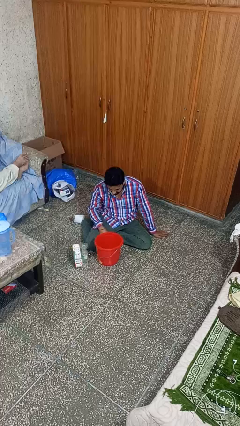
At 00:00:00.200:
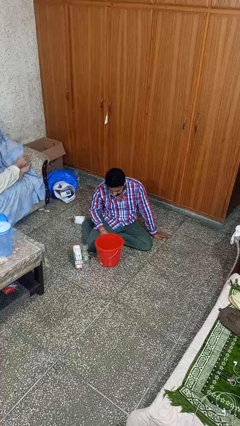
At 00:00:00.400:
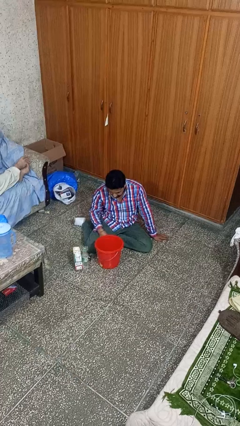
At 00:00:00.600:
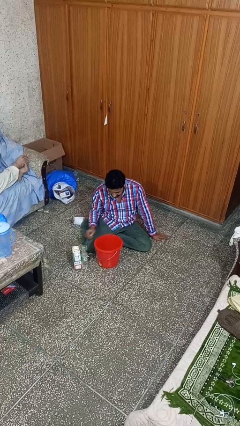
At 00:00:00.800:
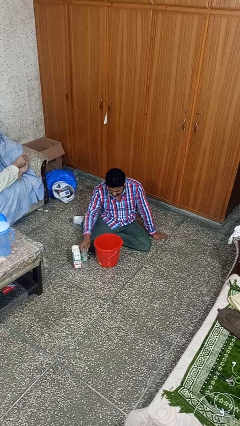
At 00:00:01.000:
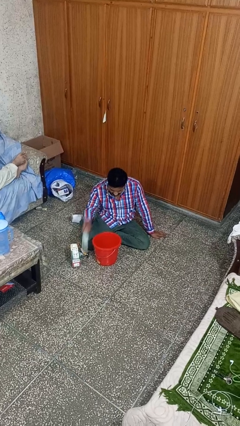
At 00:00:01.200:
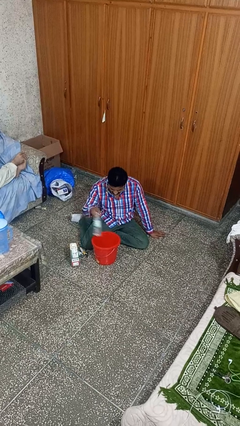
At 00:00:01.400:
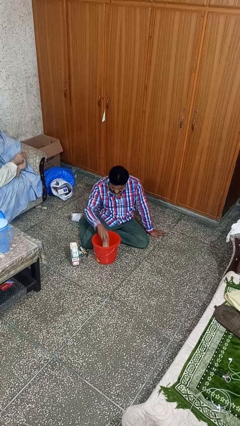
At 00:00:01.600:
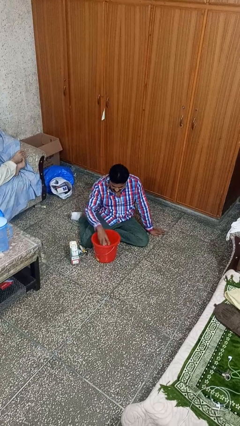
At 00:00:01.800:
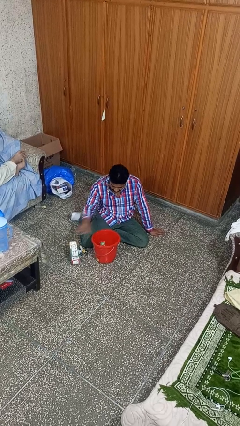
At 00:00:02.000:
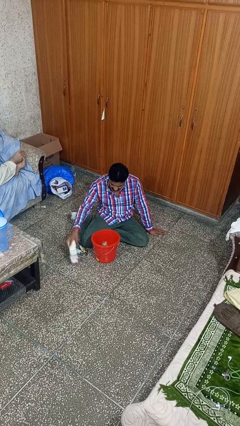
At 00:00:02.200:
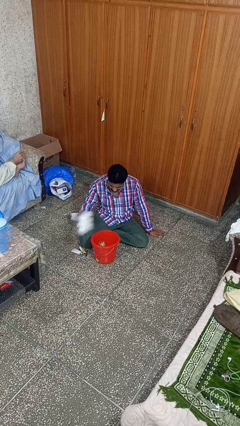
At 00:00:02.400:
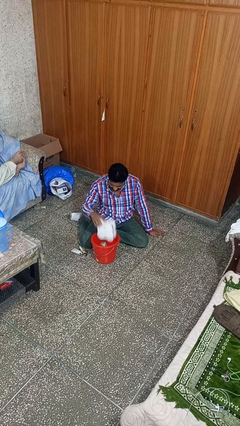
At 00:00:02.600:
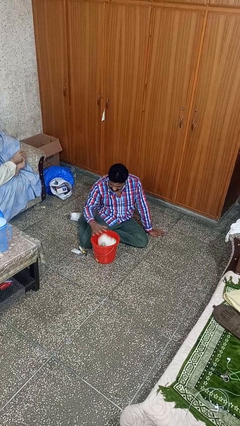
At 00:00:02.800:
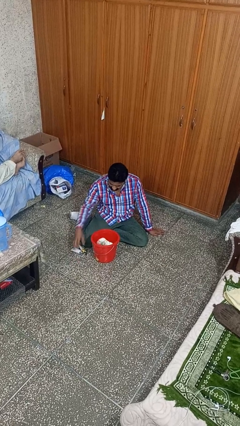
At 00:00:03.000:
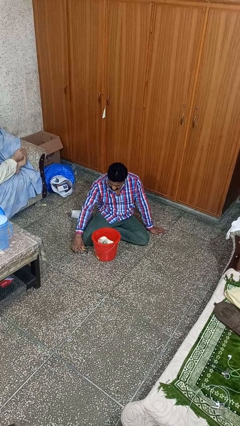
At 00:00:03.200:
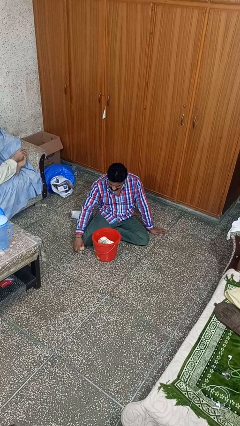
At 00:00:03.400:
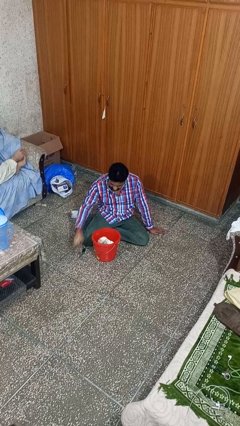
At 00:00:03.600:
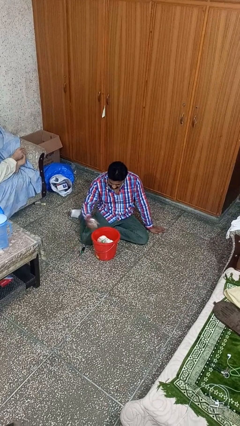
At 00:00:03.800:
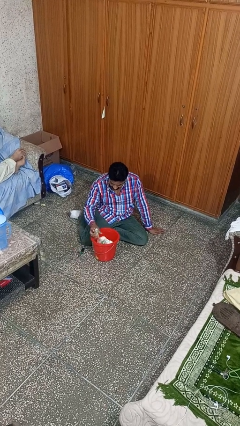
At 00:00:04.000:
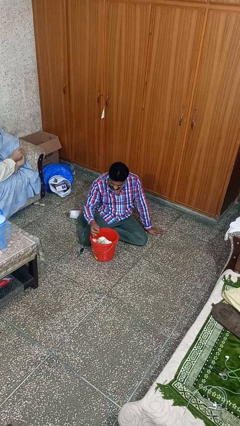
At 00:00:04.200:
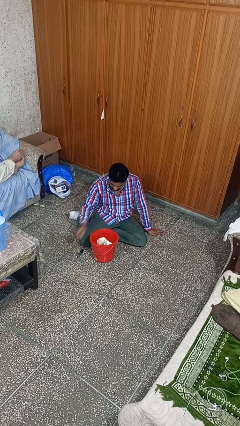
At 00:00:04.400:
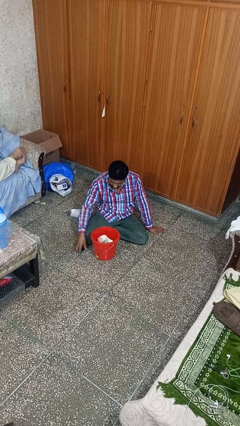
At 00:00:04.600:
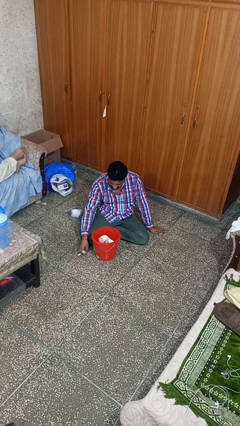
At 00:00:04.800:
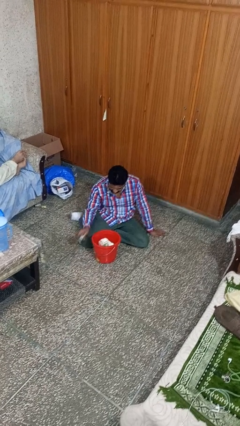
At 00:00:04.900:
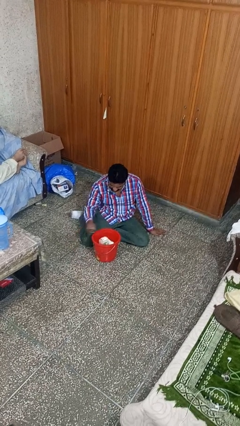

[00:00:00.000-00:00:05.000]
person puts object into basket

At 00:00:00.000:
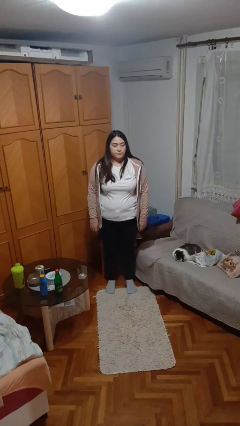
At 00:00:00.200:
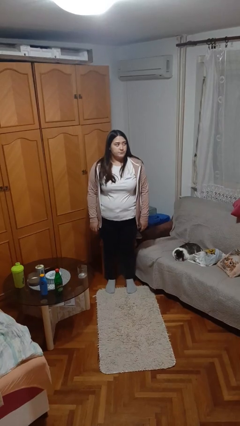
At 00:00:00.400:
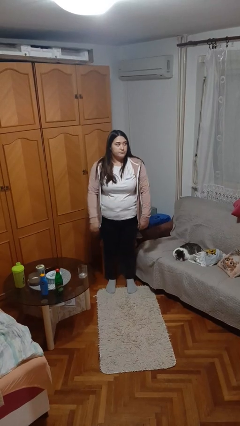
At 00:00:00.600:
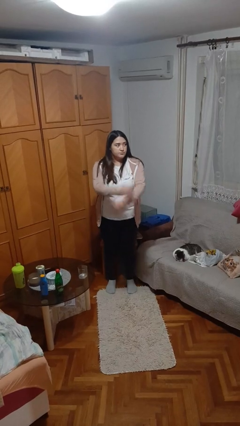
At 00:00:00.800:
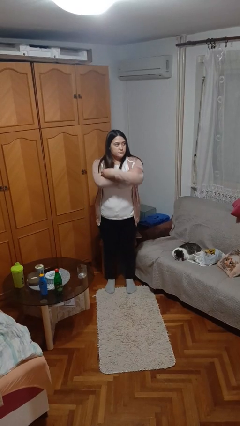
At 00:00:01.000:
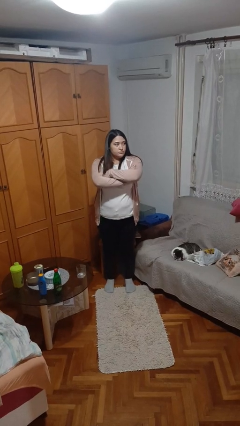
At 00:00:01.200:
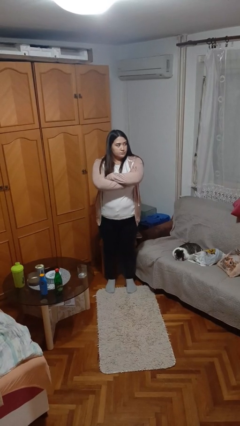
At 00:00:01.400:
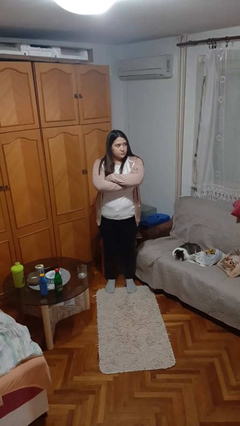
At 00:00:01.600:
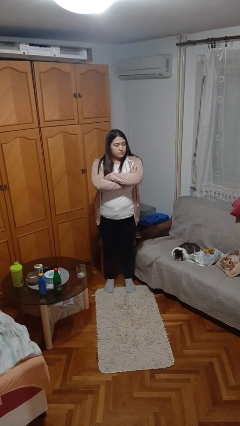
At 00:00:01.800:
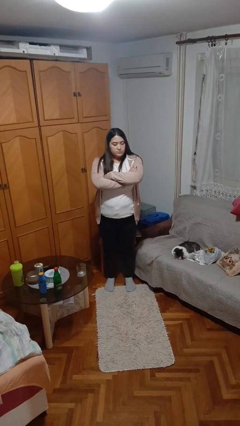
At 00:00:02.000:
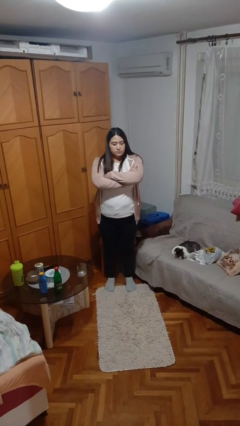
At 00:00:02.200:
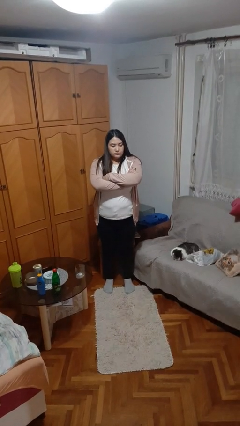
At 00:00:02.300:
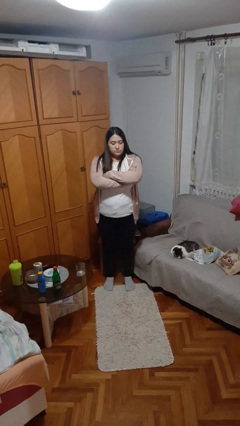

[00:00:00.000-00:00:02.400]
person crosses arms

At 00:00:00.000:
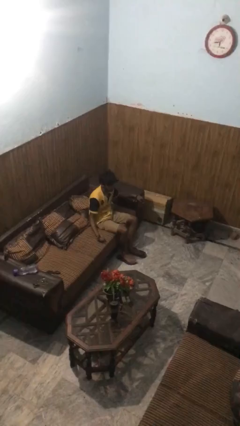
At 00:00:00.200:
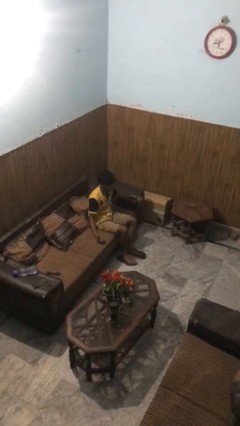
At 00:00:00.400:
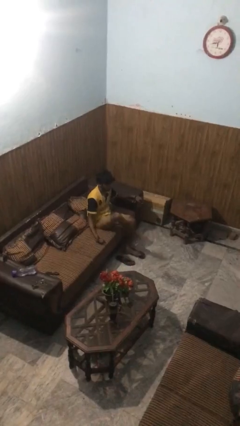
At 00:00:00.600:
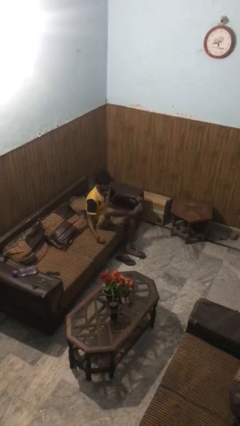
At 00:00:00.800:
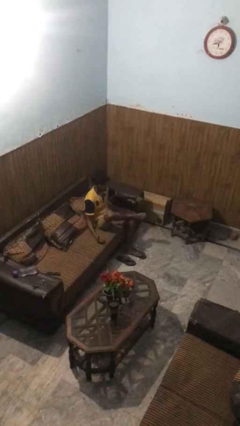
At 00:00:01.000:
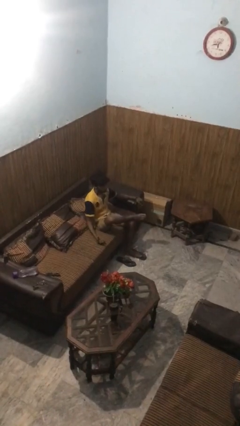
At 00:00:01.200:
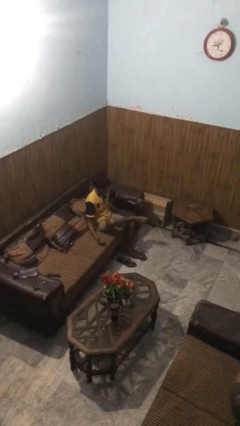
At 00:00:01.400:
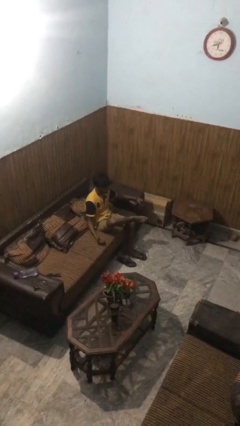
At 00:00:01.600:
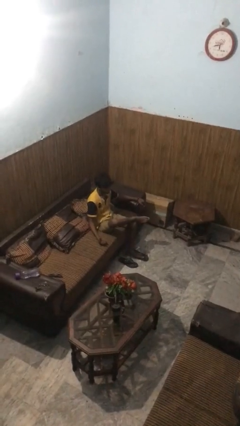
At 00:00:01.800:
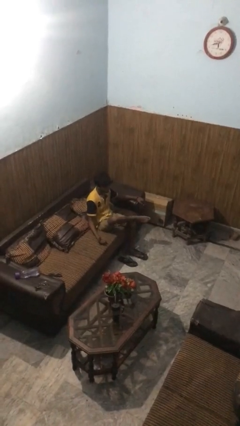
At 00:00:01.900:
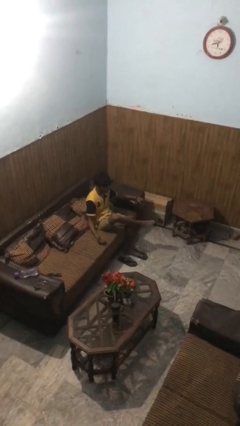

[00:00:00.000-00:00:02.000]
person crosses legs

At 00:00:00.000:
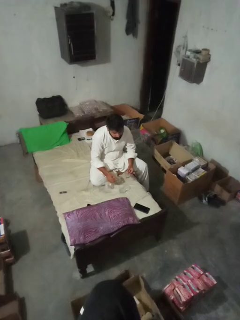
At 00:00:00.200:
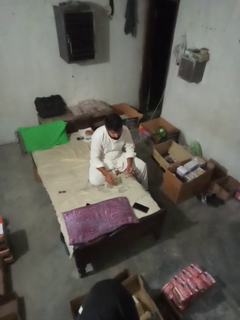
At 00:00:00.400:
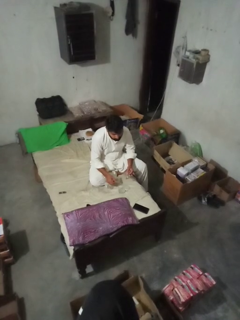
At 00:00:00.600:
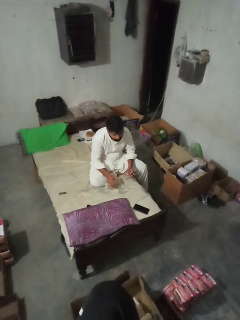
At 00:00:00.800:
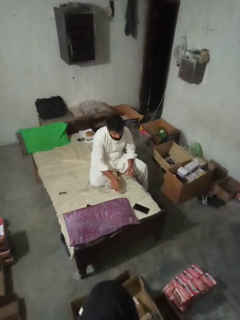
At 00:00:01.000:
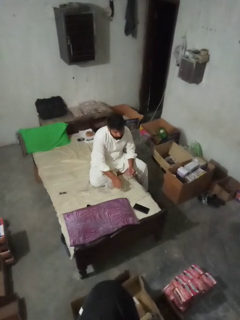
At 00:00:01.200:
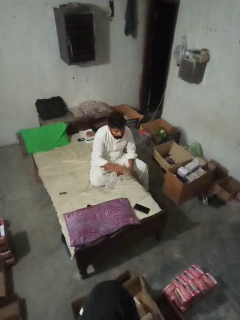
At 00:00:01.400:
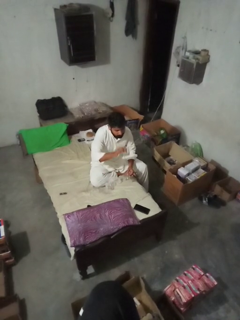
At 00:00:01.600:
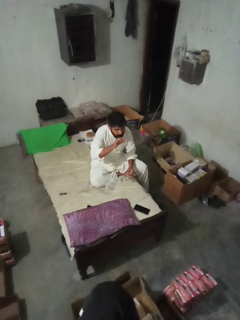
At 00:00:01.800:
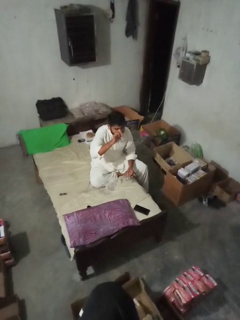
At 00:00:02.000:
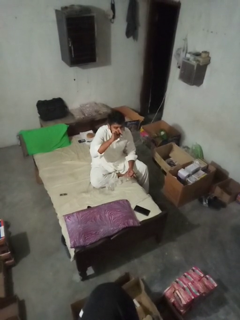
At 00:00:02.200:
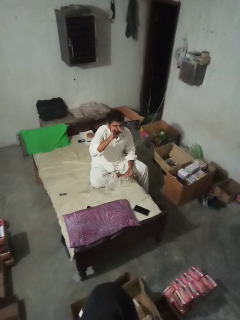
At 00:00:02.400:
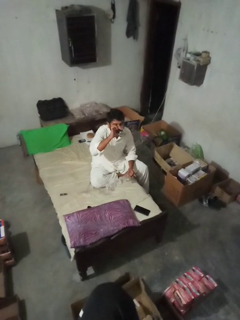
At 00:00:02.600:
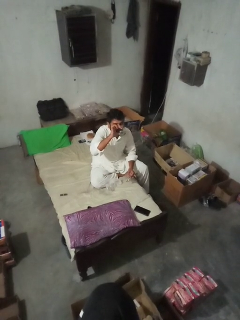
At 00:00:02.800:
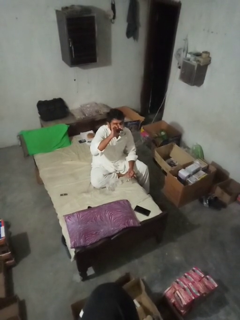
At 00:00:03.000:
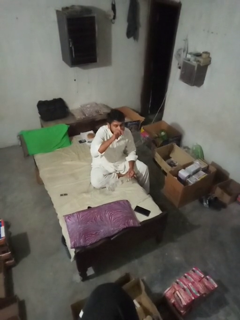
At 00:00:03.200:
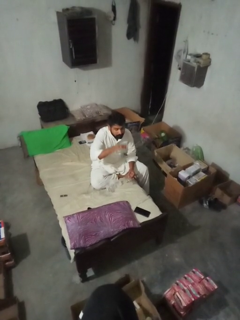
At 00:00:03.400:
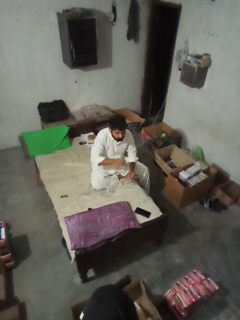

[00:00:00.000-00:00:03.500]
person drinks from cup

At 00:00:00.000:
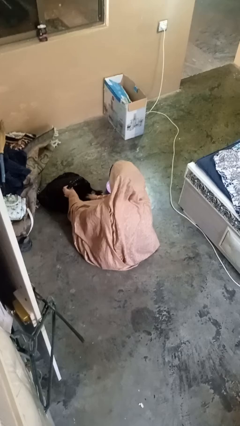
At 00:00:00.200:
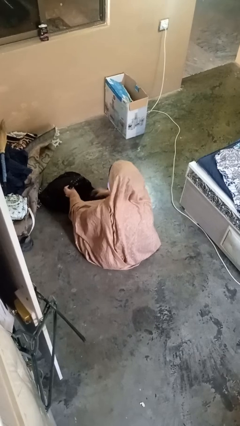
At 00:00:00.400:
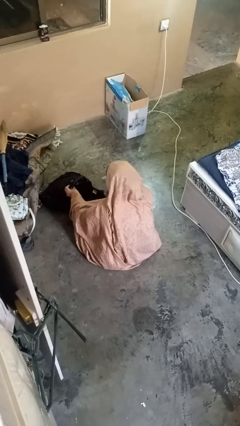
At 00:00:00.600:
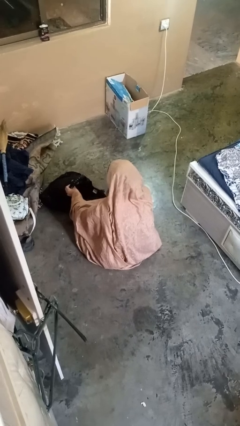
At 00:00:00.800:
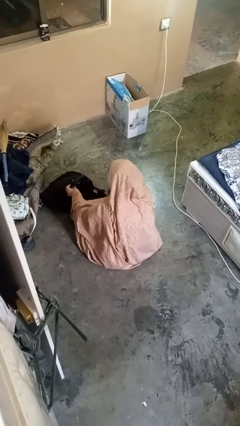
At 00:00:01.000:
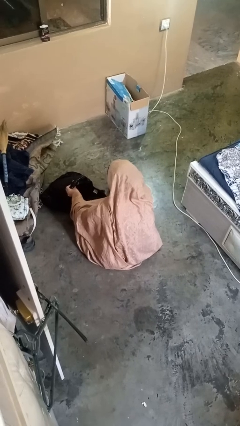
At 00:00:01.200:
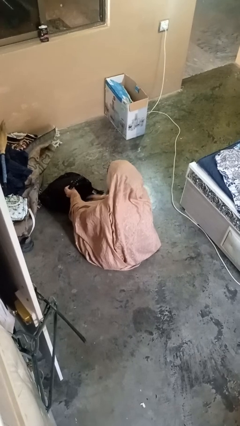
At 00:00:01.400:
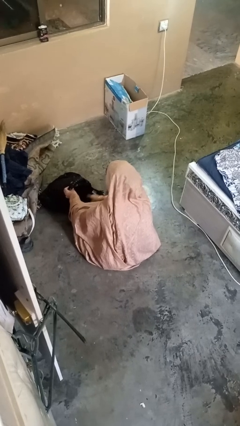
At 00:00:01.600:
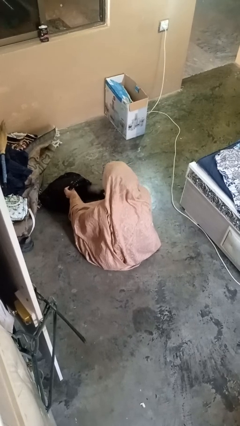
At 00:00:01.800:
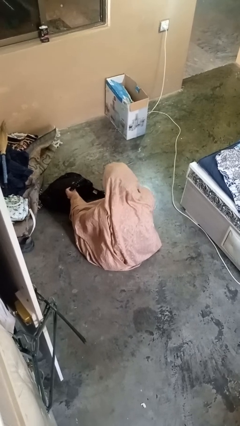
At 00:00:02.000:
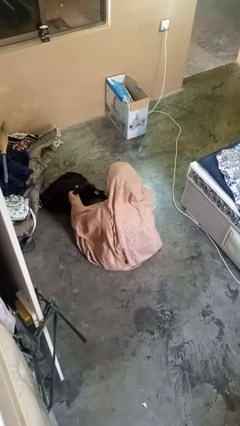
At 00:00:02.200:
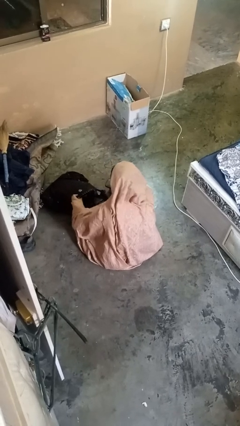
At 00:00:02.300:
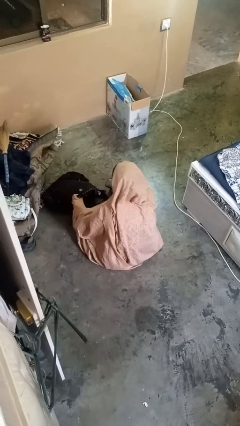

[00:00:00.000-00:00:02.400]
person takes object from backpack

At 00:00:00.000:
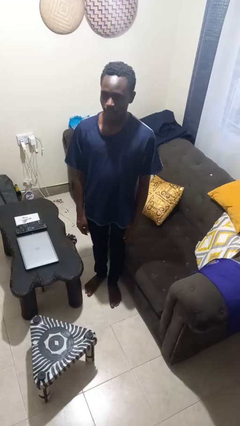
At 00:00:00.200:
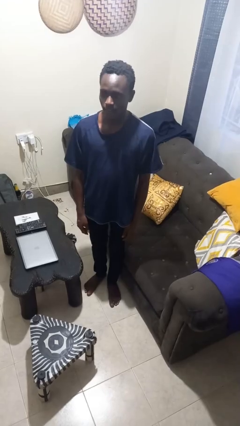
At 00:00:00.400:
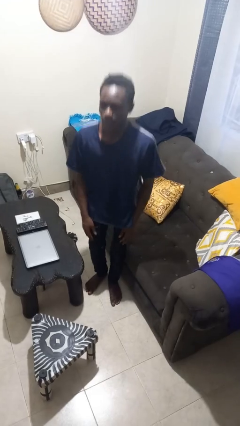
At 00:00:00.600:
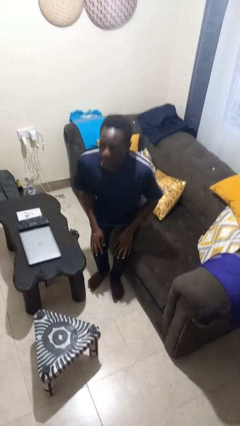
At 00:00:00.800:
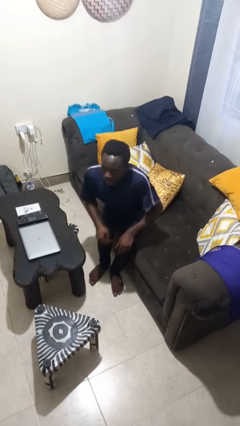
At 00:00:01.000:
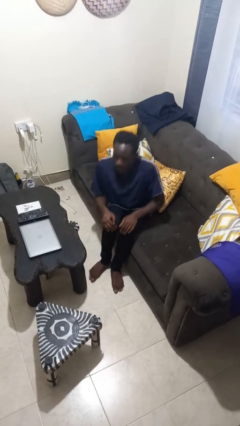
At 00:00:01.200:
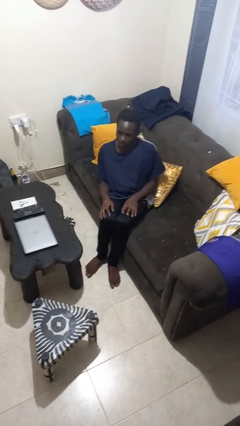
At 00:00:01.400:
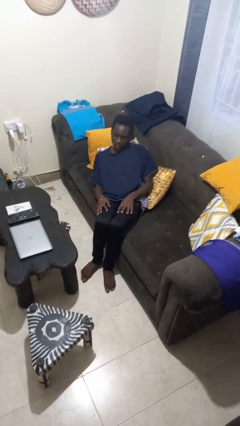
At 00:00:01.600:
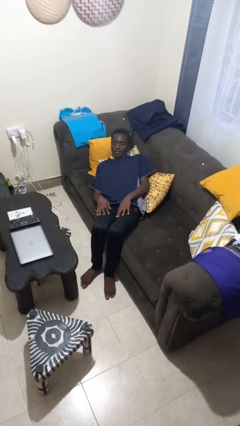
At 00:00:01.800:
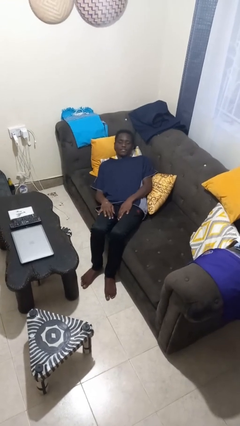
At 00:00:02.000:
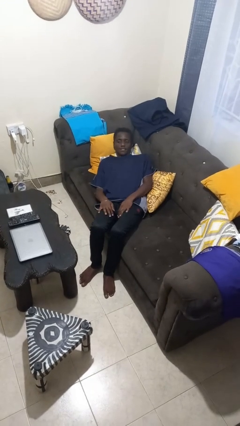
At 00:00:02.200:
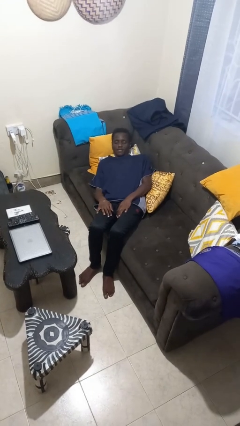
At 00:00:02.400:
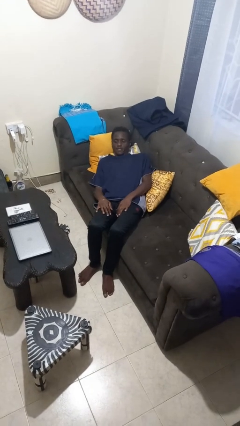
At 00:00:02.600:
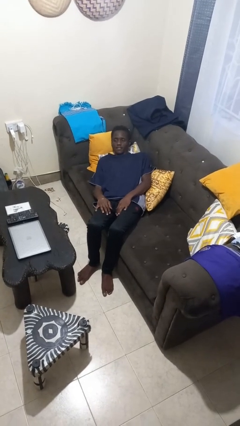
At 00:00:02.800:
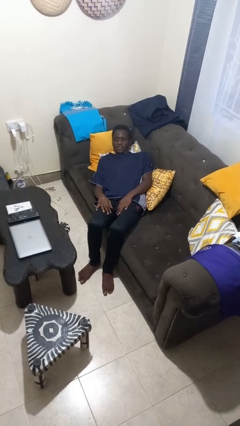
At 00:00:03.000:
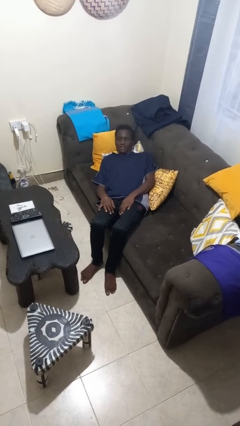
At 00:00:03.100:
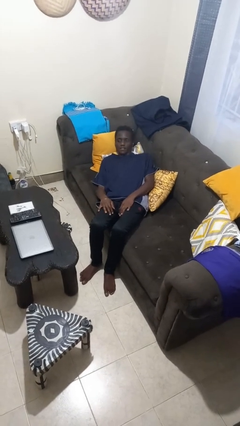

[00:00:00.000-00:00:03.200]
person lies down on couch
